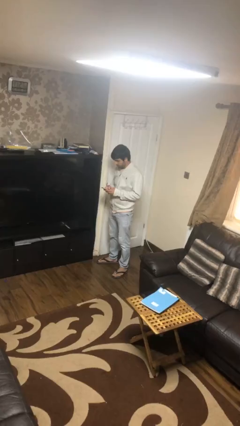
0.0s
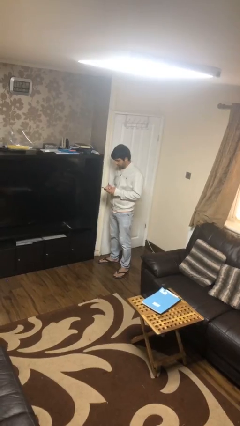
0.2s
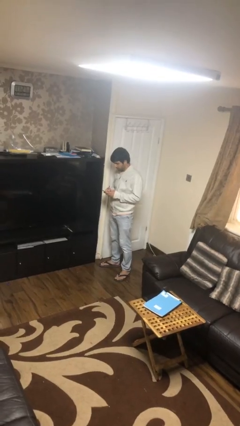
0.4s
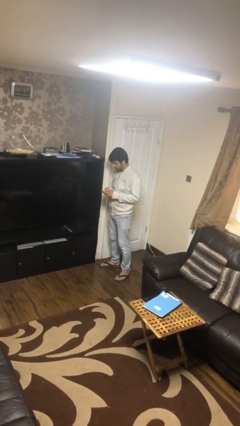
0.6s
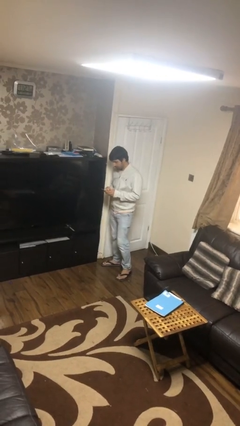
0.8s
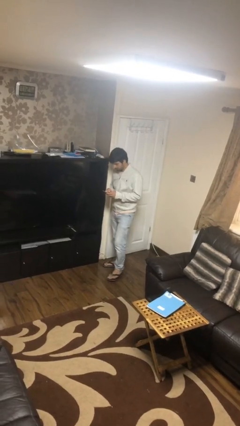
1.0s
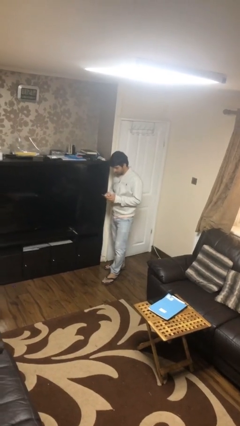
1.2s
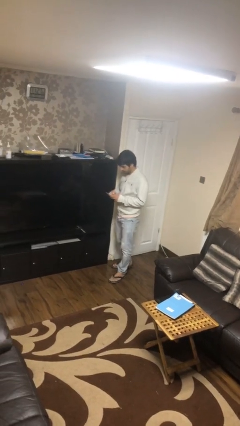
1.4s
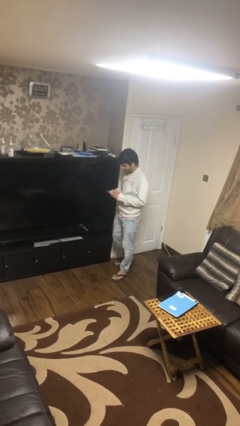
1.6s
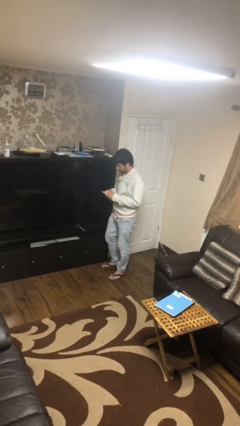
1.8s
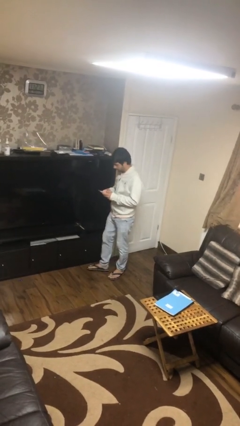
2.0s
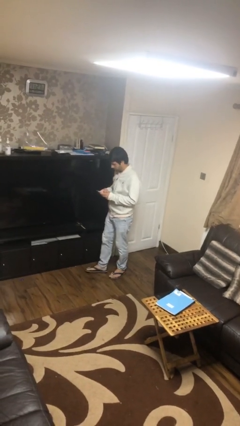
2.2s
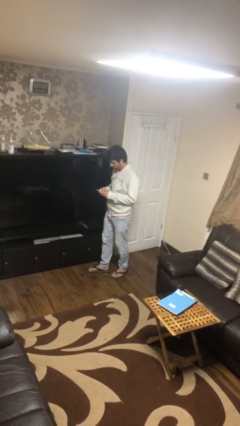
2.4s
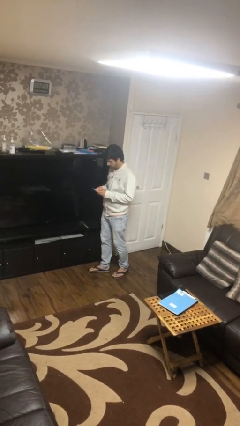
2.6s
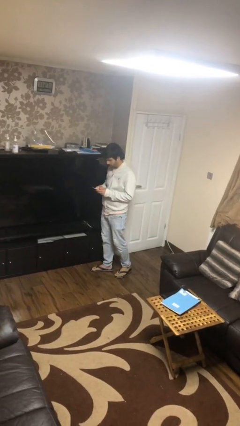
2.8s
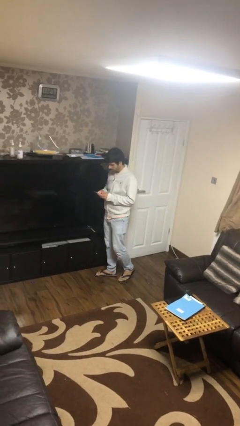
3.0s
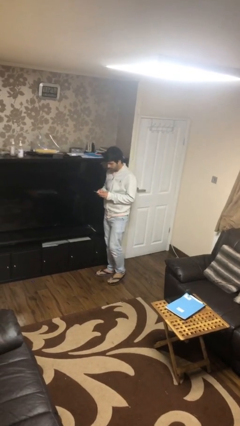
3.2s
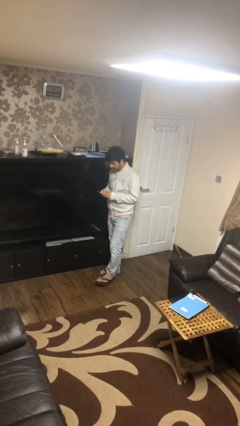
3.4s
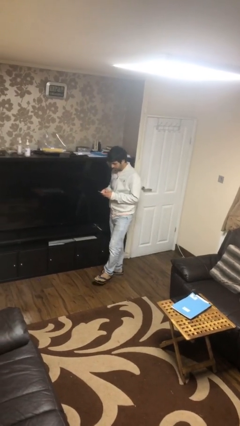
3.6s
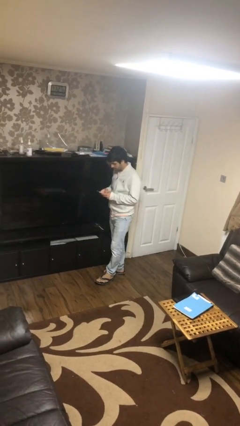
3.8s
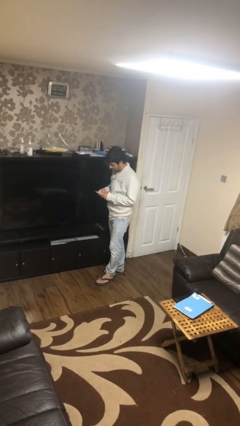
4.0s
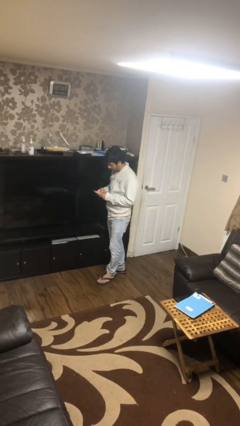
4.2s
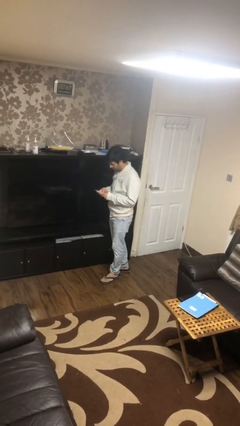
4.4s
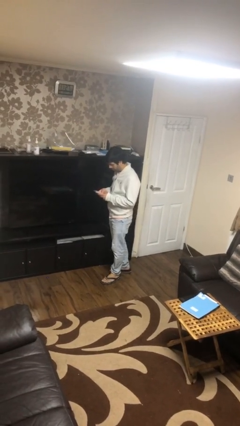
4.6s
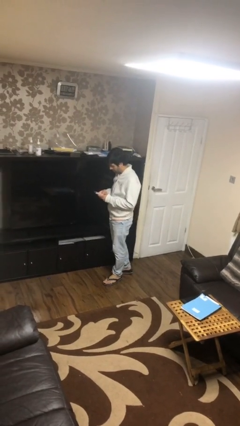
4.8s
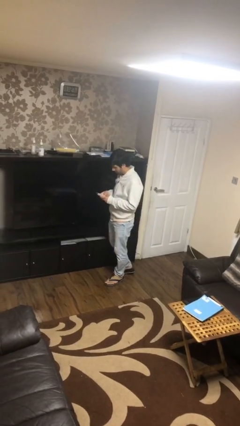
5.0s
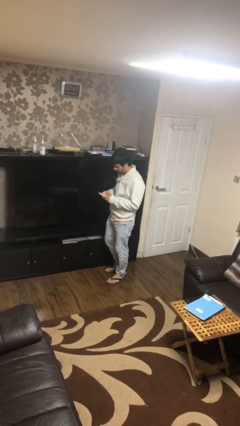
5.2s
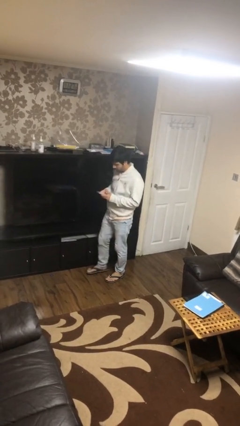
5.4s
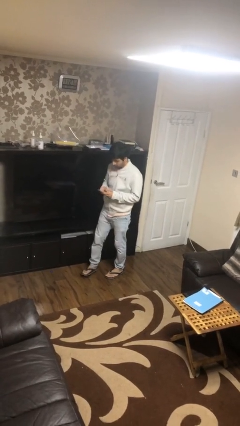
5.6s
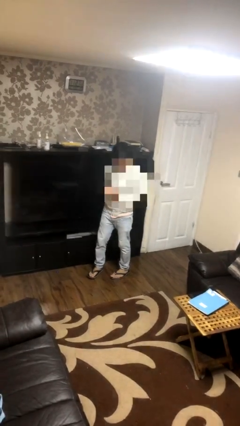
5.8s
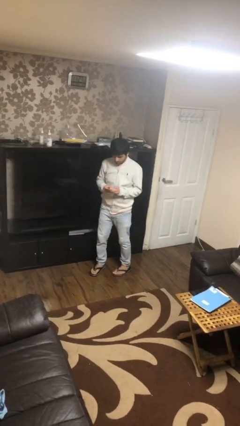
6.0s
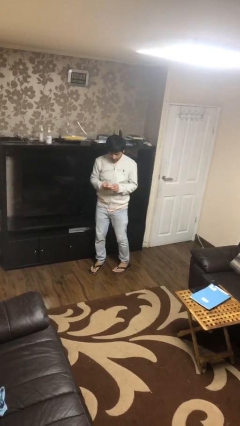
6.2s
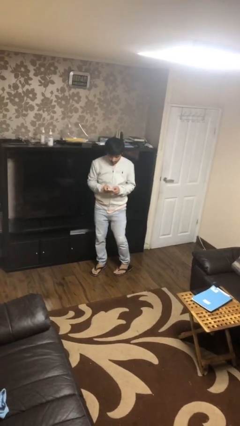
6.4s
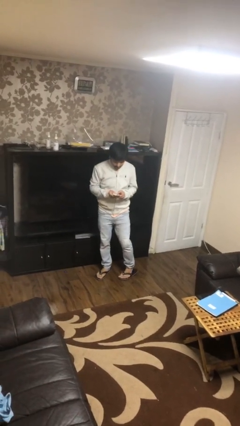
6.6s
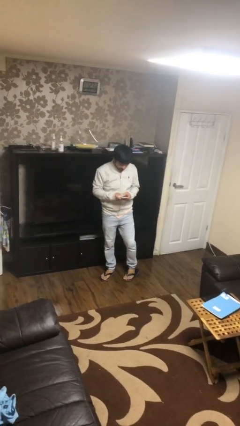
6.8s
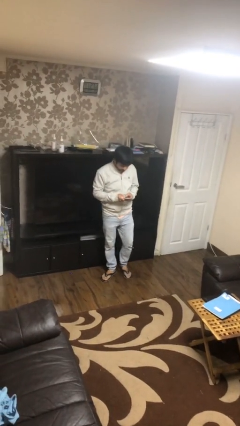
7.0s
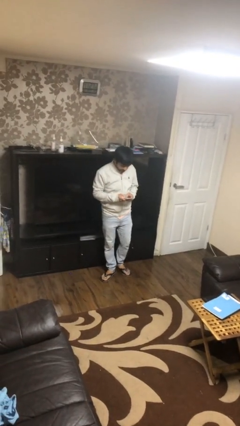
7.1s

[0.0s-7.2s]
person texts on phone

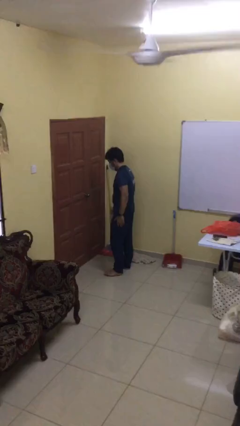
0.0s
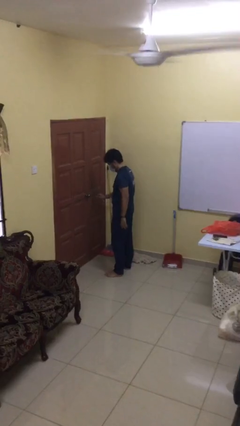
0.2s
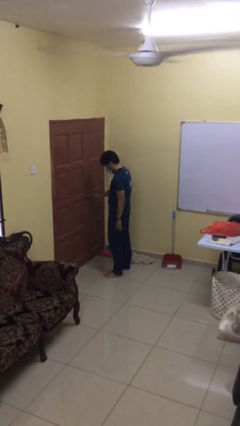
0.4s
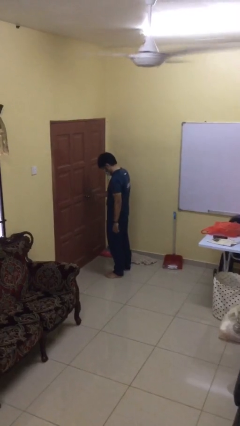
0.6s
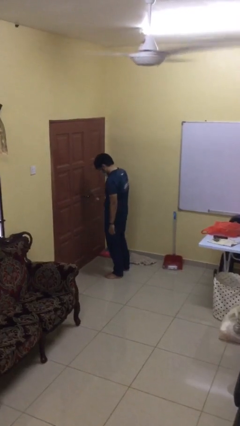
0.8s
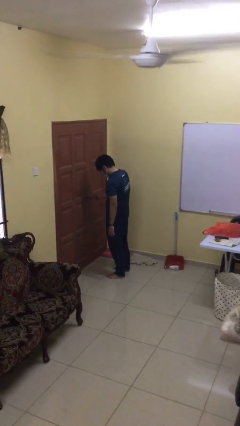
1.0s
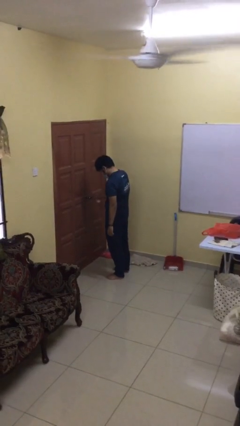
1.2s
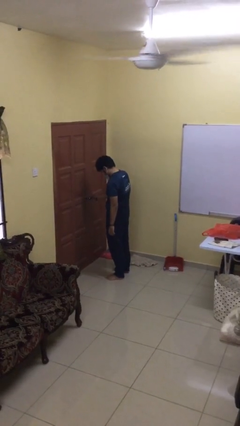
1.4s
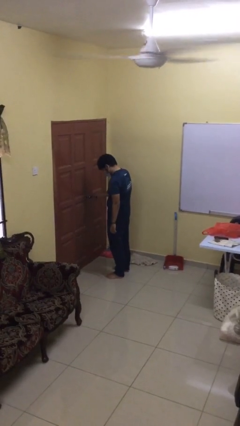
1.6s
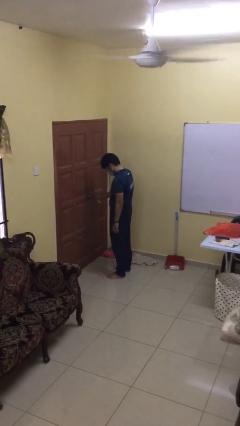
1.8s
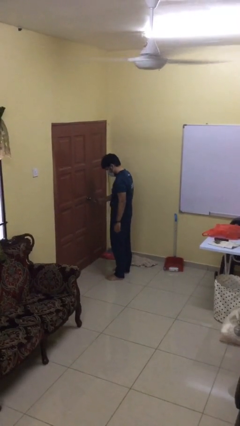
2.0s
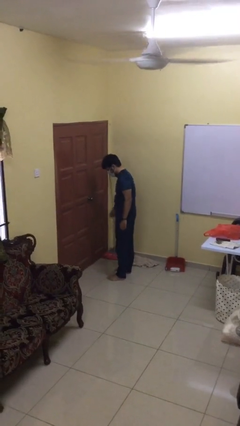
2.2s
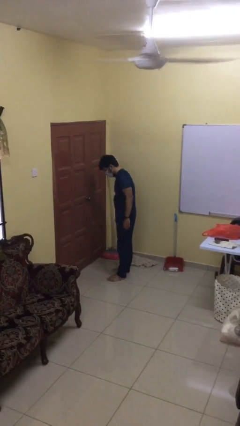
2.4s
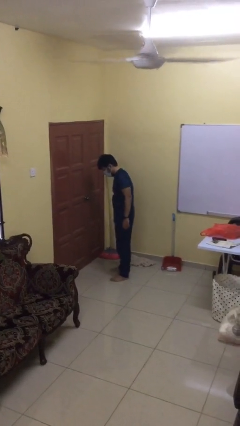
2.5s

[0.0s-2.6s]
person locks door with keys

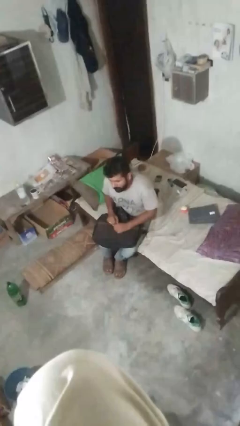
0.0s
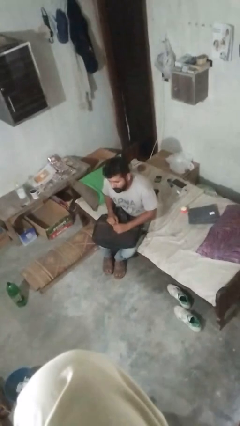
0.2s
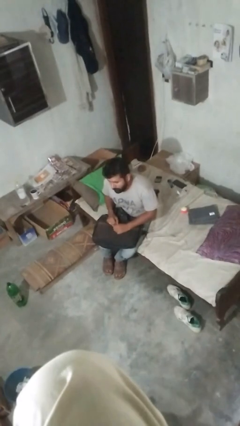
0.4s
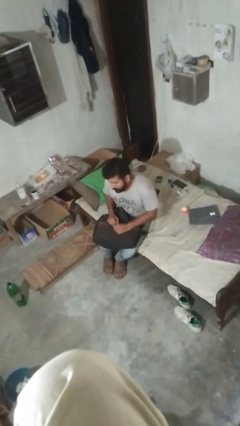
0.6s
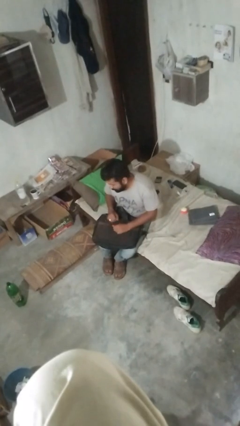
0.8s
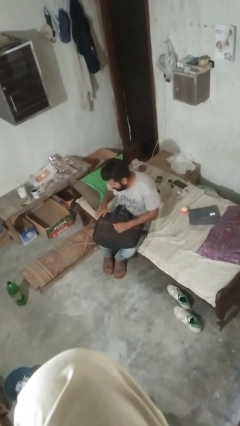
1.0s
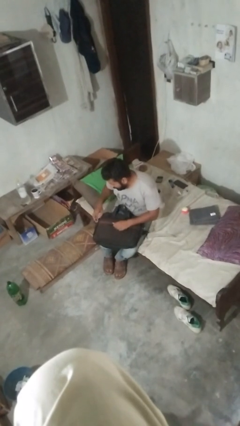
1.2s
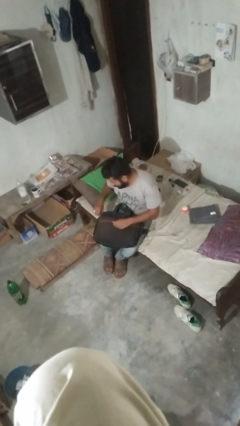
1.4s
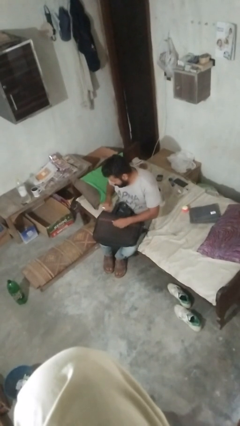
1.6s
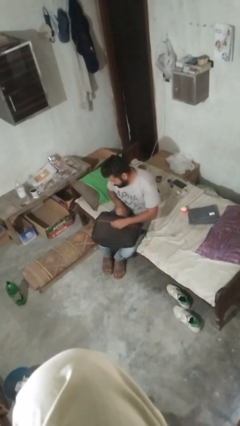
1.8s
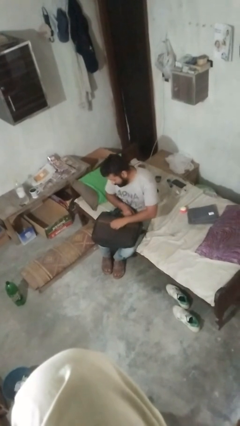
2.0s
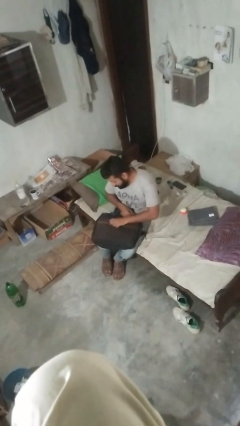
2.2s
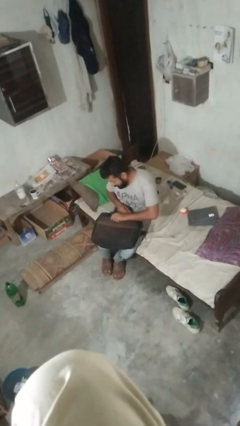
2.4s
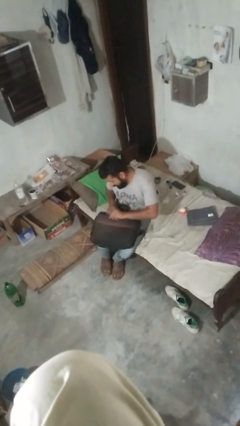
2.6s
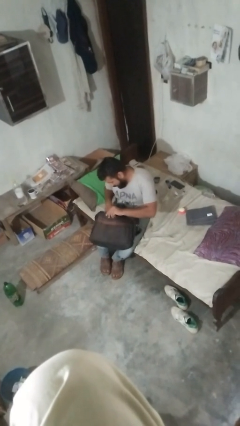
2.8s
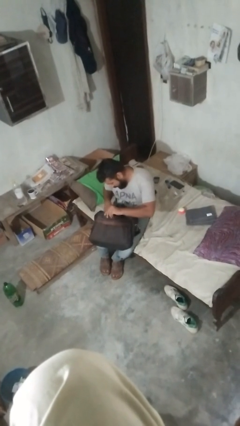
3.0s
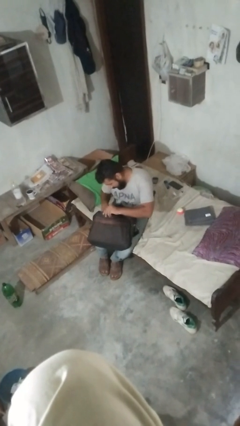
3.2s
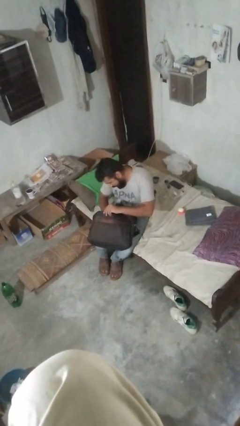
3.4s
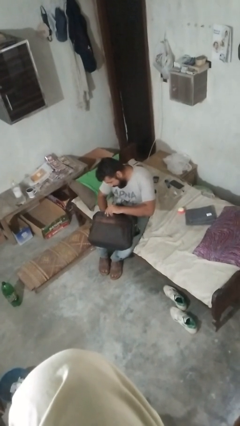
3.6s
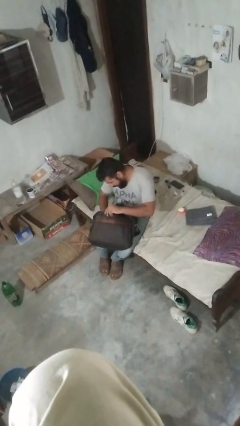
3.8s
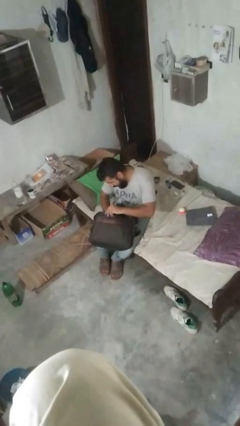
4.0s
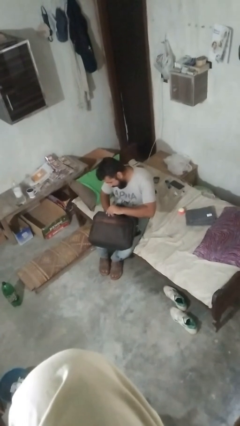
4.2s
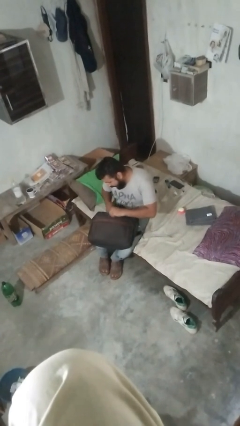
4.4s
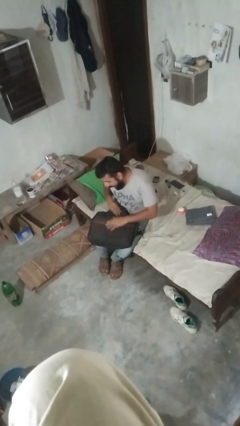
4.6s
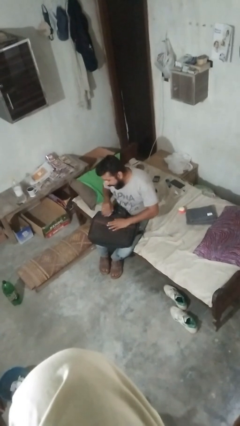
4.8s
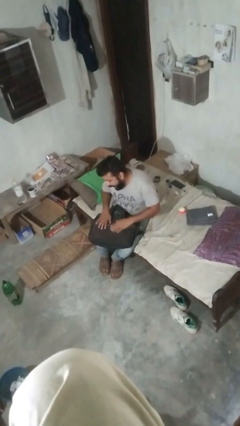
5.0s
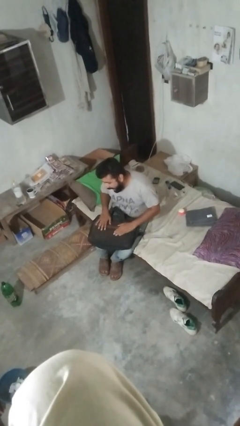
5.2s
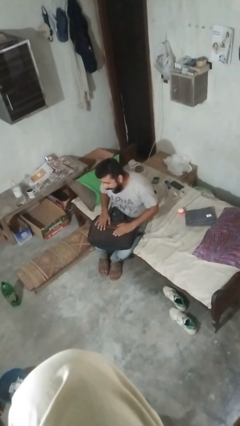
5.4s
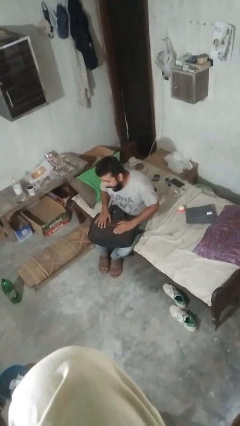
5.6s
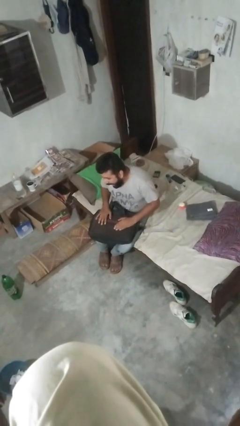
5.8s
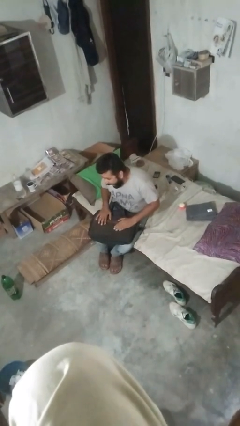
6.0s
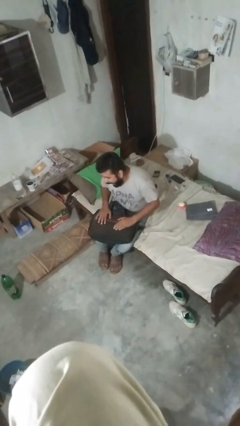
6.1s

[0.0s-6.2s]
person searches in bag

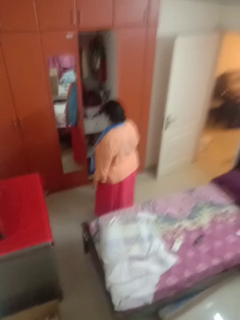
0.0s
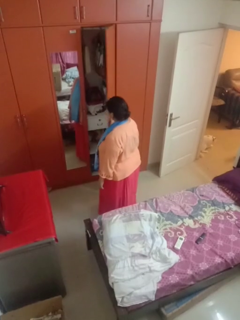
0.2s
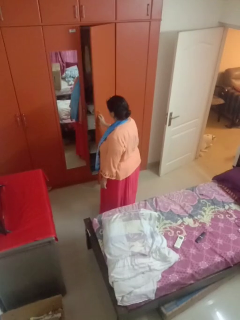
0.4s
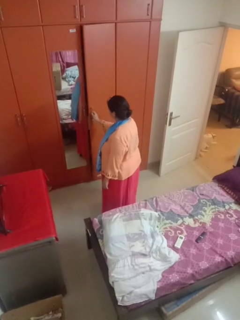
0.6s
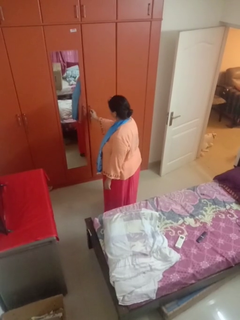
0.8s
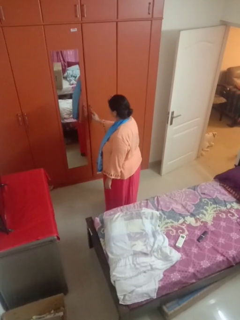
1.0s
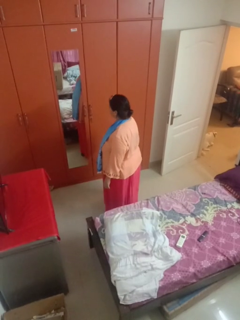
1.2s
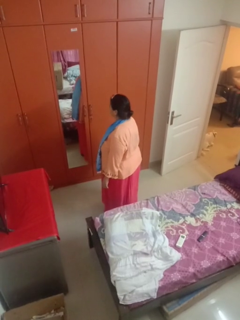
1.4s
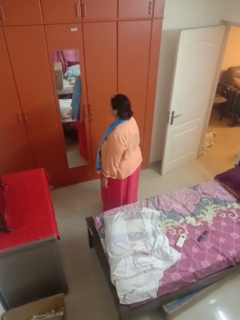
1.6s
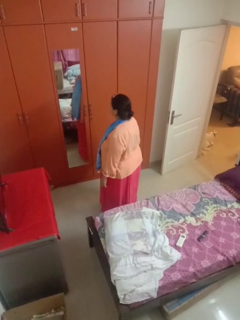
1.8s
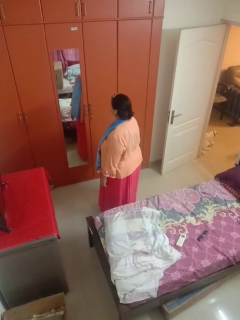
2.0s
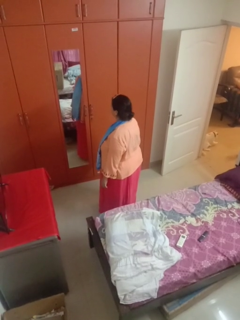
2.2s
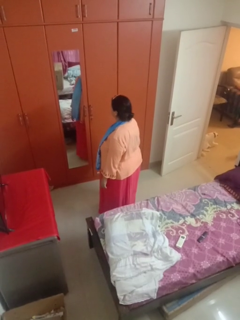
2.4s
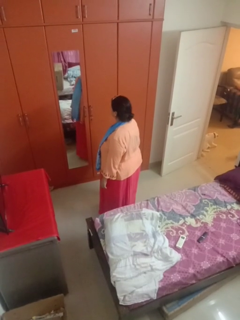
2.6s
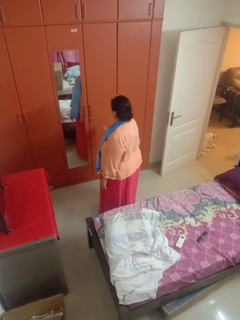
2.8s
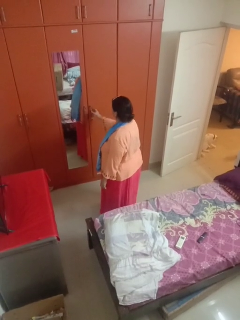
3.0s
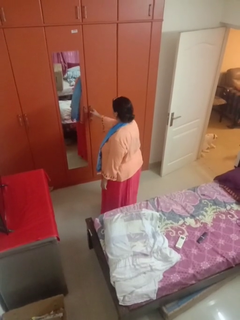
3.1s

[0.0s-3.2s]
person closes closet door
